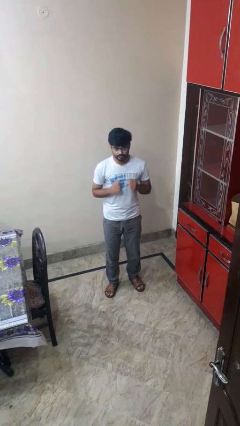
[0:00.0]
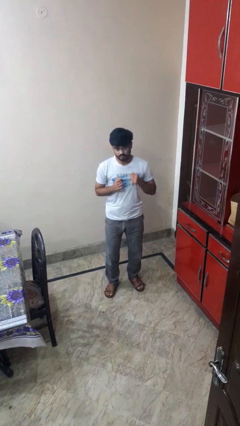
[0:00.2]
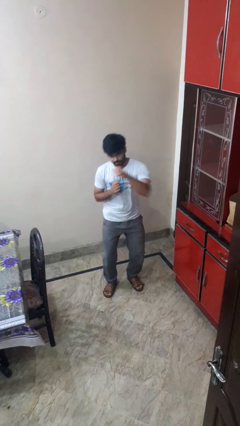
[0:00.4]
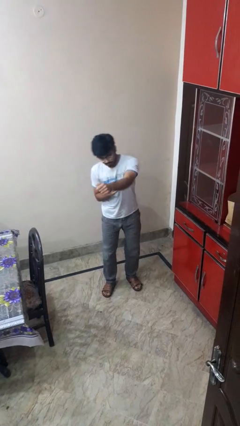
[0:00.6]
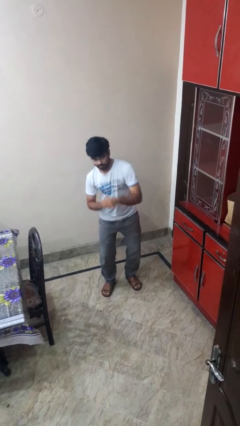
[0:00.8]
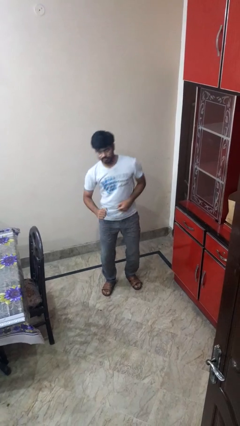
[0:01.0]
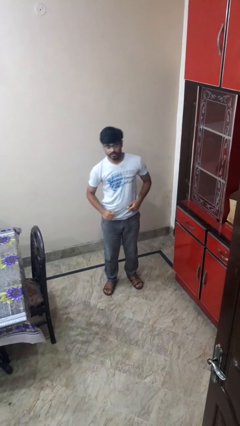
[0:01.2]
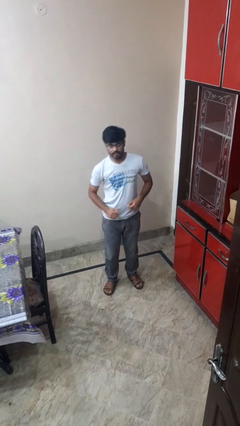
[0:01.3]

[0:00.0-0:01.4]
person punches

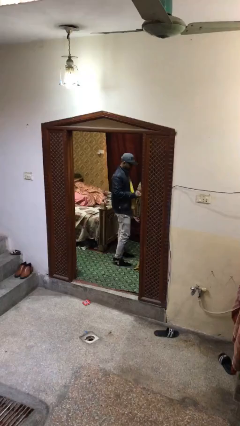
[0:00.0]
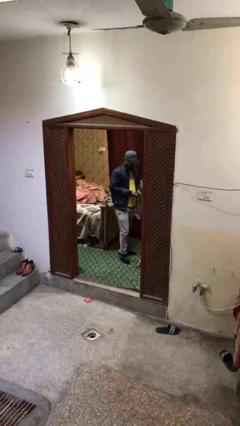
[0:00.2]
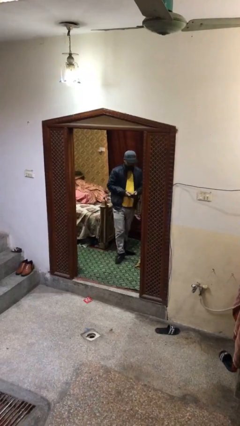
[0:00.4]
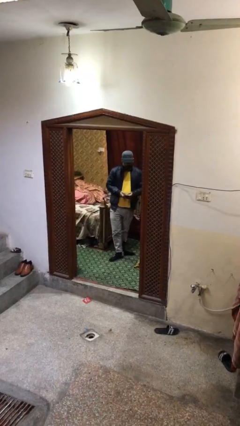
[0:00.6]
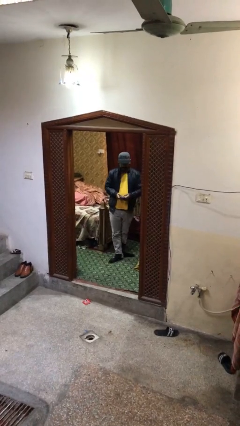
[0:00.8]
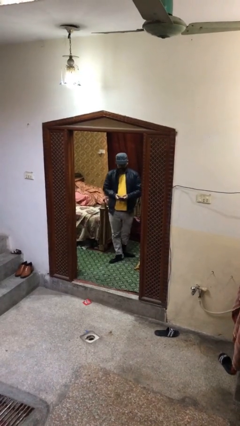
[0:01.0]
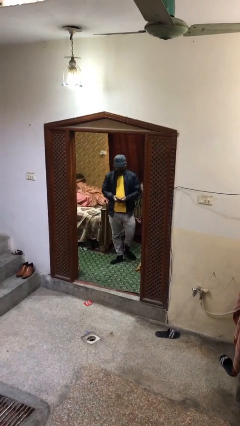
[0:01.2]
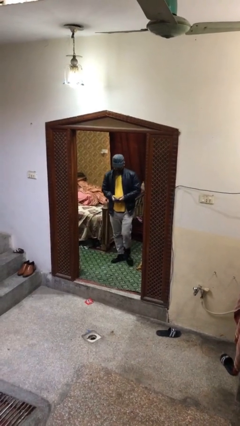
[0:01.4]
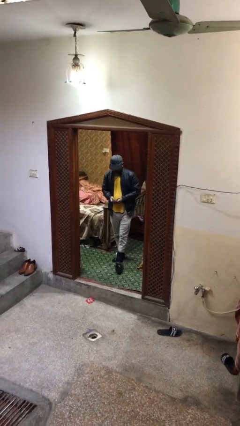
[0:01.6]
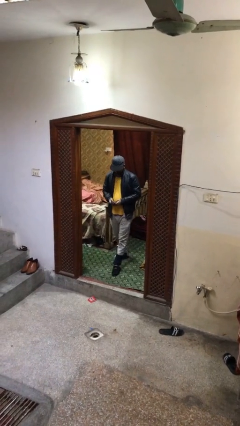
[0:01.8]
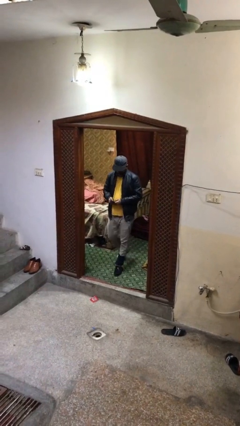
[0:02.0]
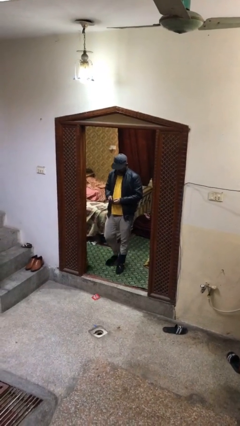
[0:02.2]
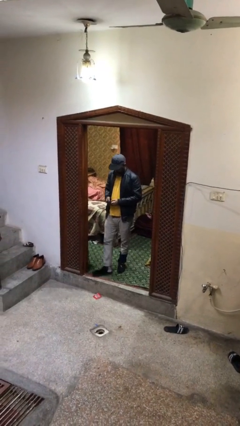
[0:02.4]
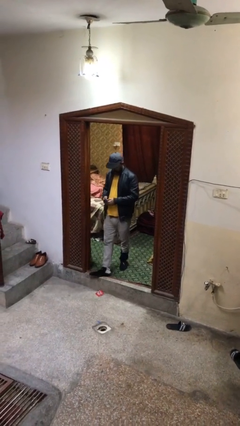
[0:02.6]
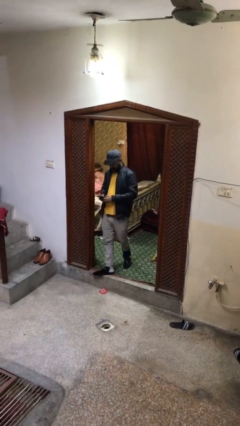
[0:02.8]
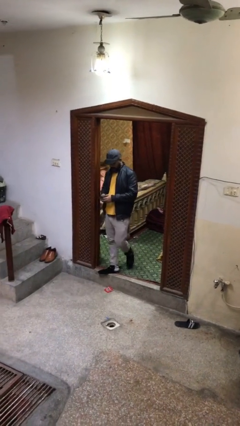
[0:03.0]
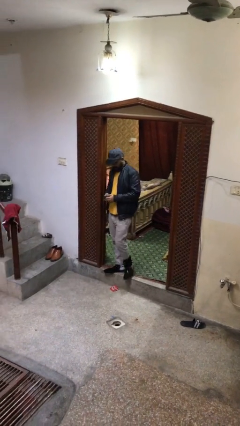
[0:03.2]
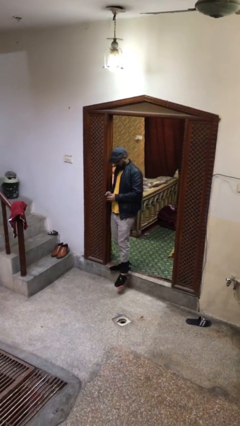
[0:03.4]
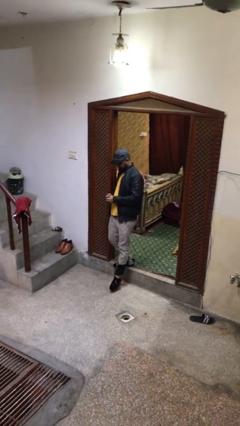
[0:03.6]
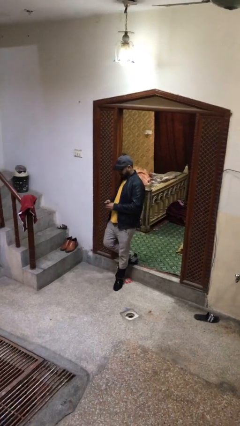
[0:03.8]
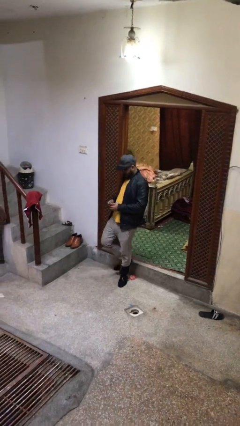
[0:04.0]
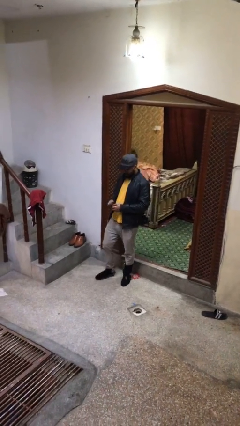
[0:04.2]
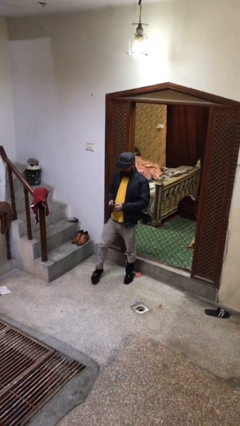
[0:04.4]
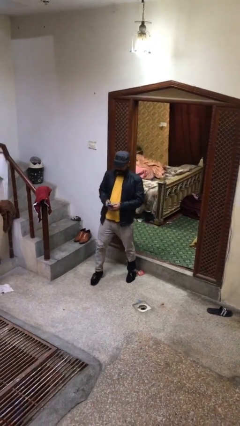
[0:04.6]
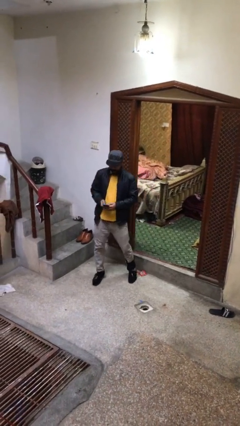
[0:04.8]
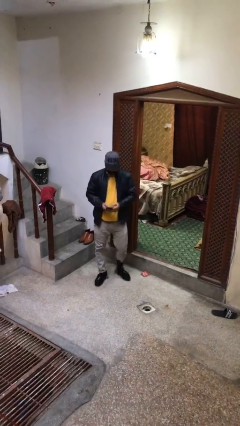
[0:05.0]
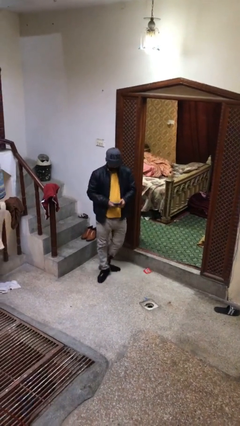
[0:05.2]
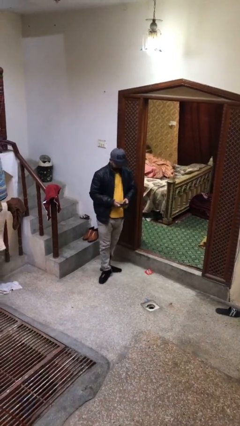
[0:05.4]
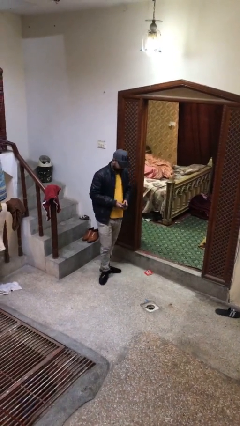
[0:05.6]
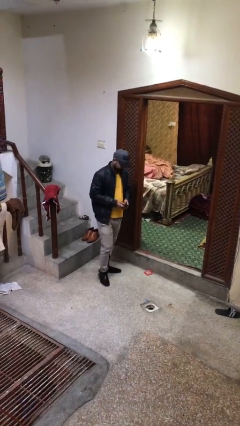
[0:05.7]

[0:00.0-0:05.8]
person enters scene through structure

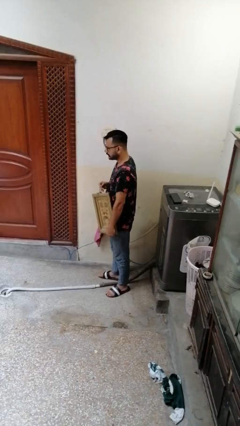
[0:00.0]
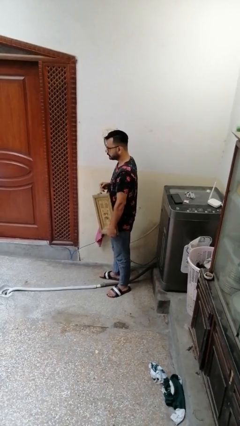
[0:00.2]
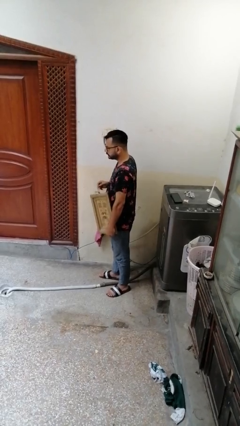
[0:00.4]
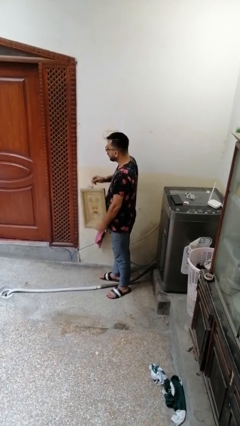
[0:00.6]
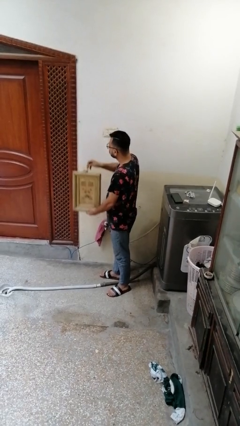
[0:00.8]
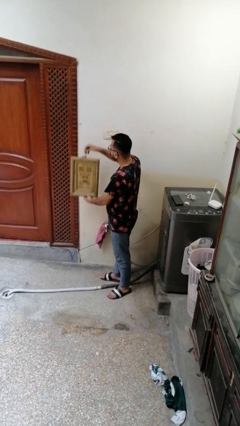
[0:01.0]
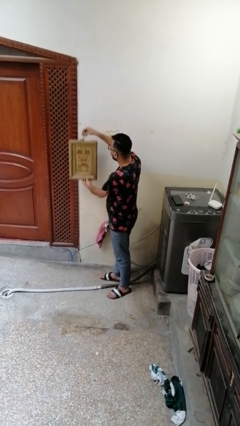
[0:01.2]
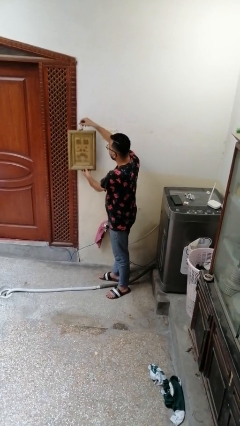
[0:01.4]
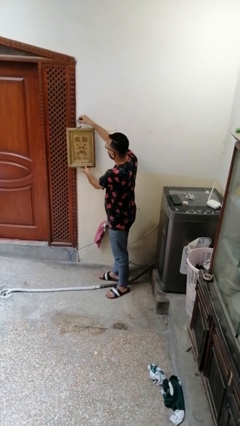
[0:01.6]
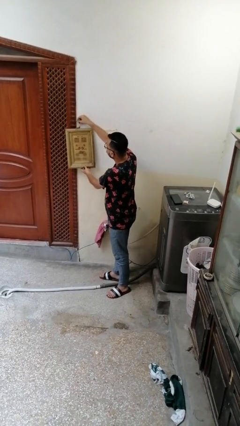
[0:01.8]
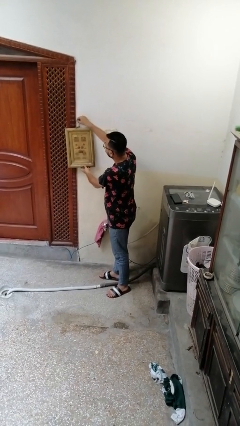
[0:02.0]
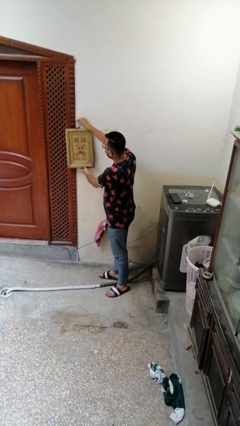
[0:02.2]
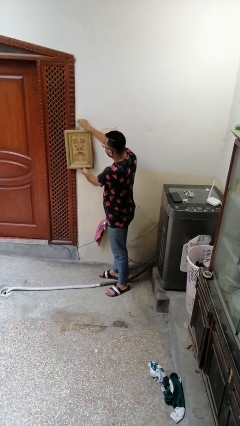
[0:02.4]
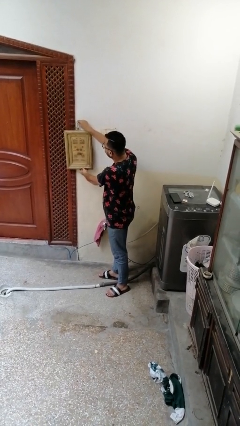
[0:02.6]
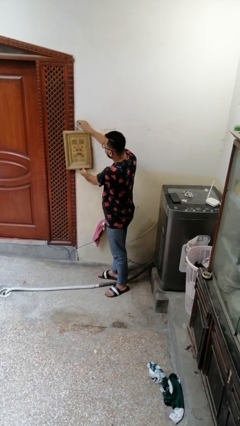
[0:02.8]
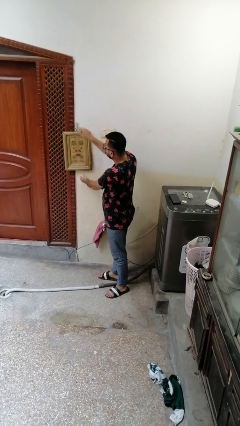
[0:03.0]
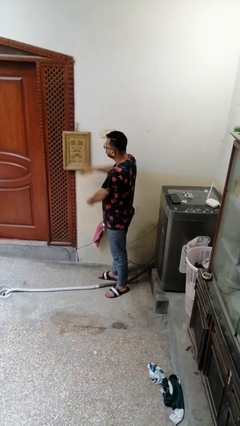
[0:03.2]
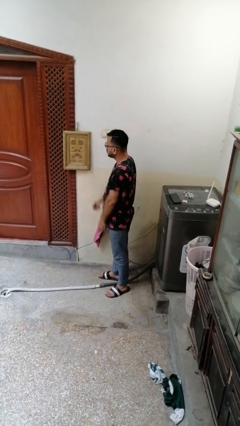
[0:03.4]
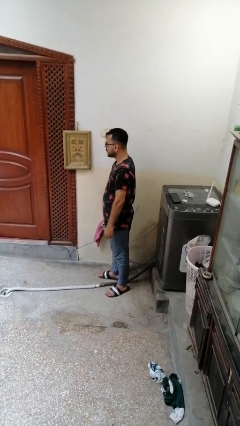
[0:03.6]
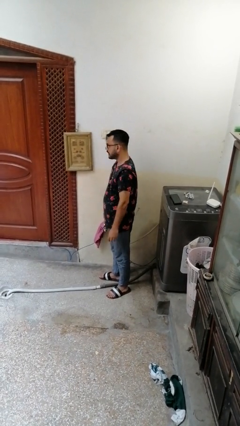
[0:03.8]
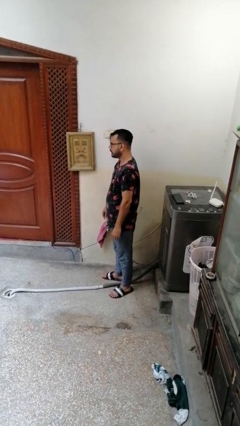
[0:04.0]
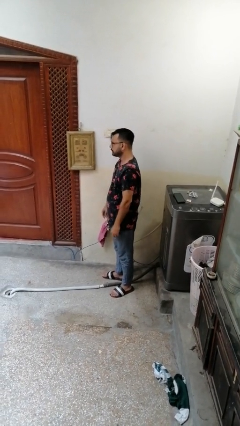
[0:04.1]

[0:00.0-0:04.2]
person puts up picture frame

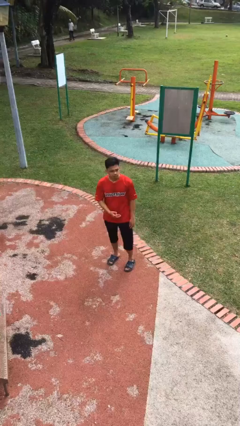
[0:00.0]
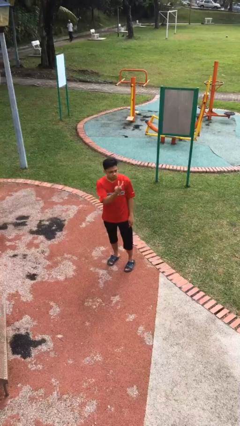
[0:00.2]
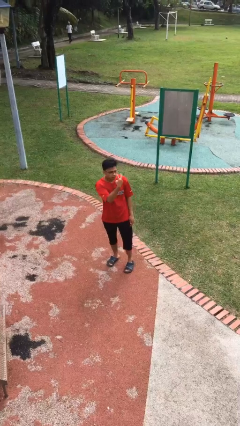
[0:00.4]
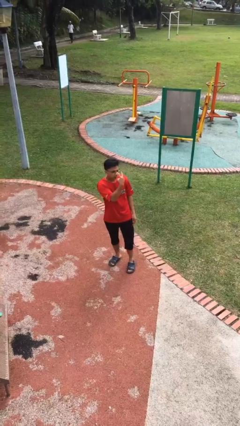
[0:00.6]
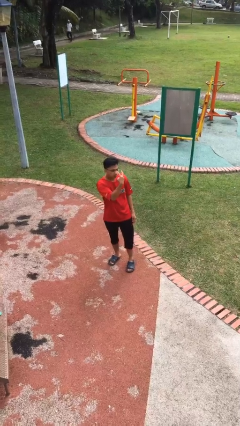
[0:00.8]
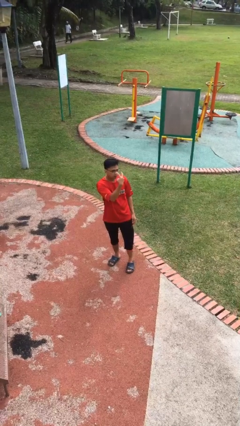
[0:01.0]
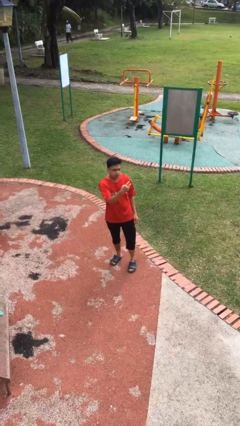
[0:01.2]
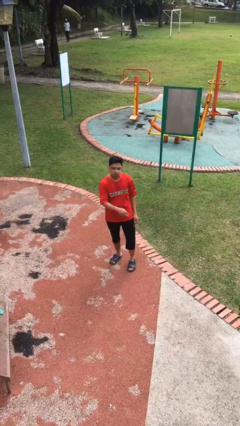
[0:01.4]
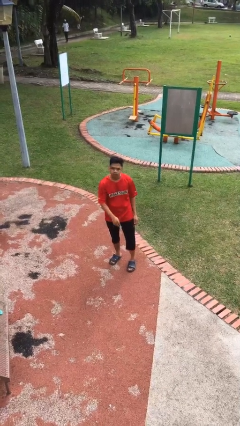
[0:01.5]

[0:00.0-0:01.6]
person gestures watch closely

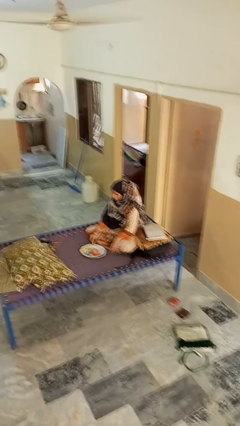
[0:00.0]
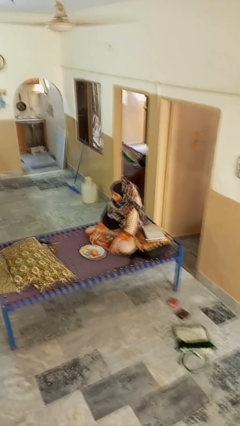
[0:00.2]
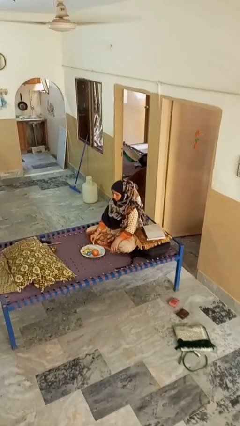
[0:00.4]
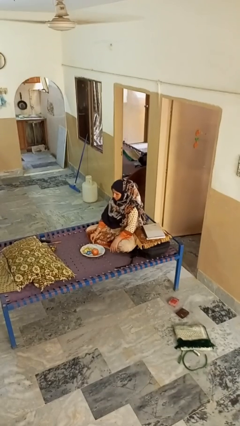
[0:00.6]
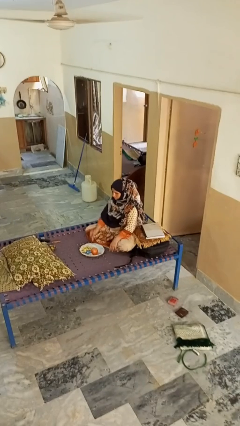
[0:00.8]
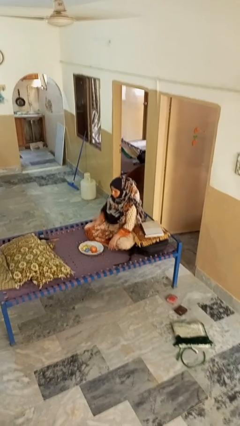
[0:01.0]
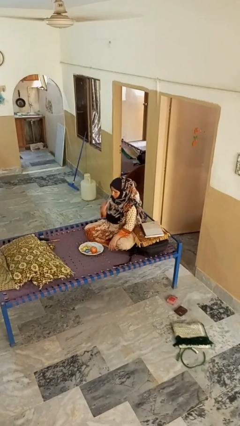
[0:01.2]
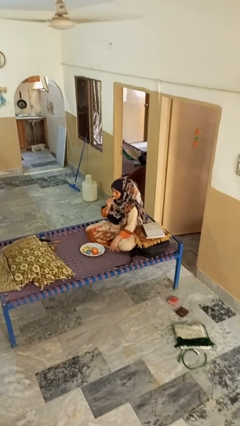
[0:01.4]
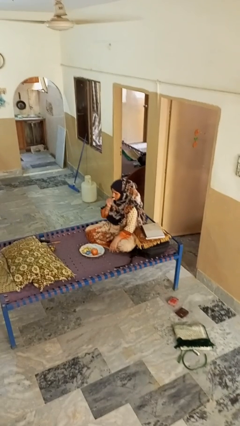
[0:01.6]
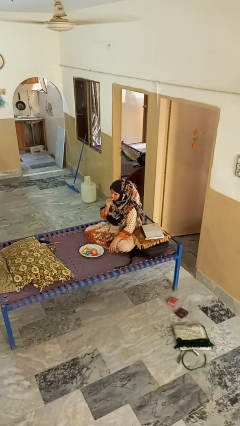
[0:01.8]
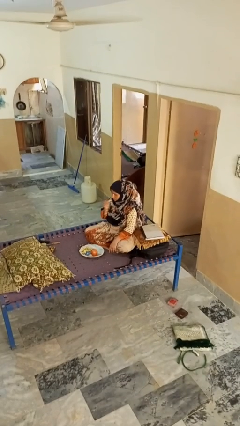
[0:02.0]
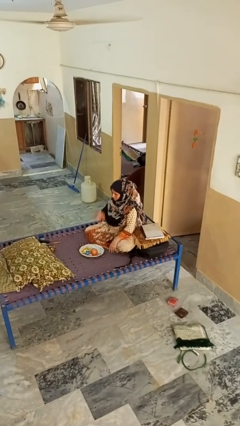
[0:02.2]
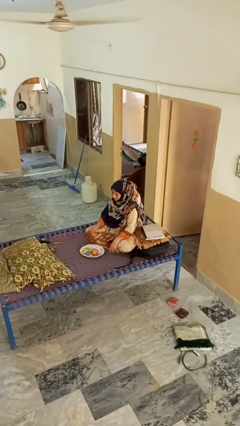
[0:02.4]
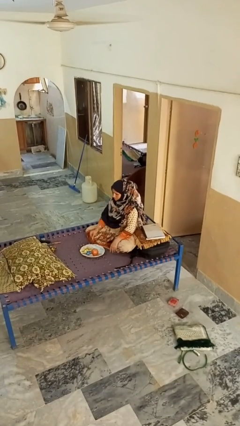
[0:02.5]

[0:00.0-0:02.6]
person eats apple

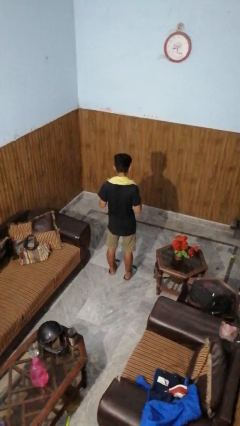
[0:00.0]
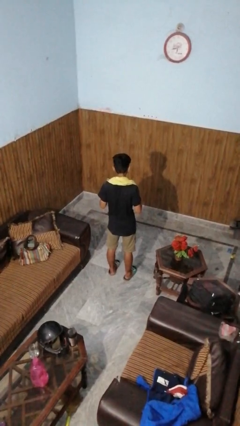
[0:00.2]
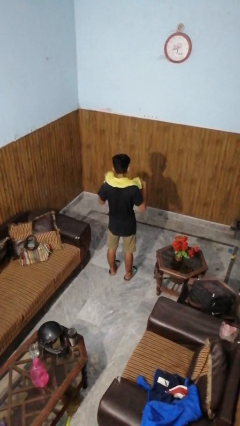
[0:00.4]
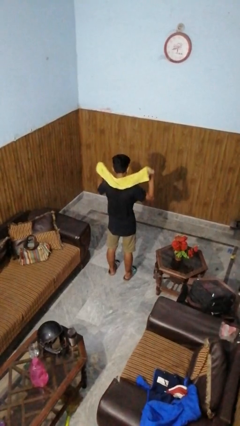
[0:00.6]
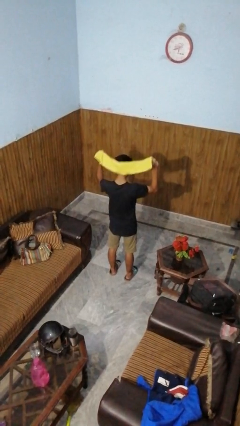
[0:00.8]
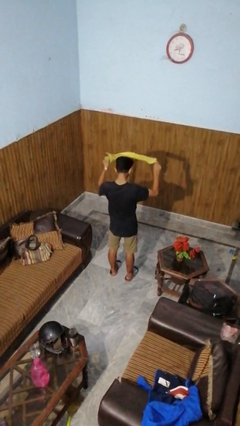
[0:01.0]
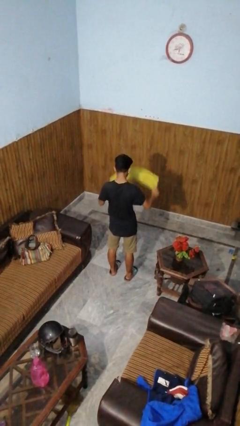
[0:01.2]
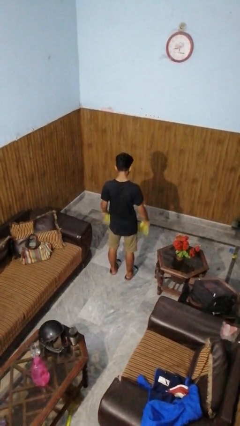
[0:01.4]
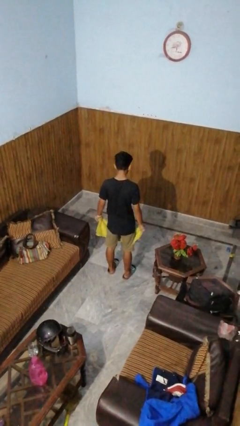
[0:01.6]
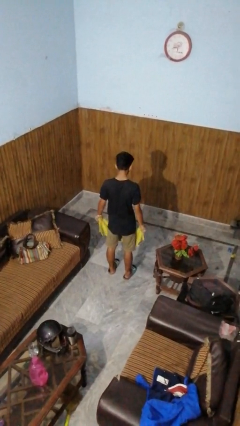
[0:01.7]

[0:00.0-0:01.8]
person takes off scarf
